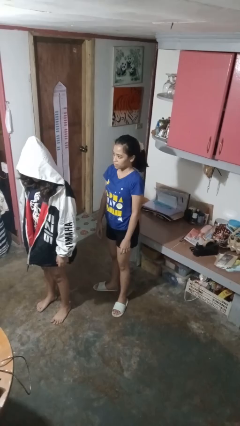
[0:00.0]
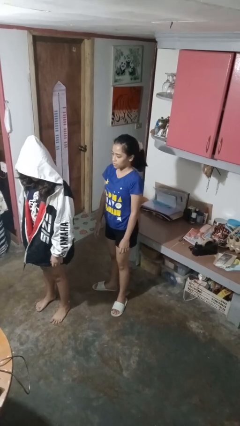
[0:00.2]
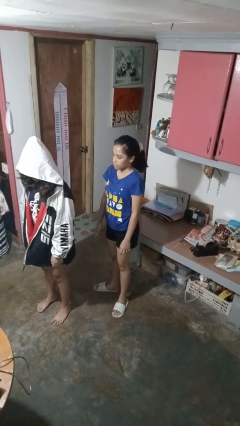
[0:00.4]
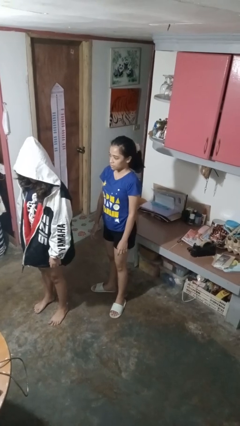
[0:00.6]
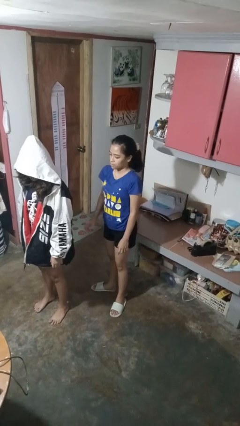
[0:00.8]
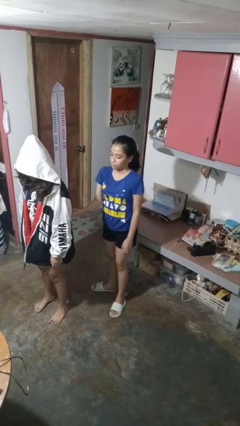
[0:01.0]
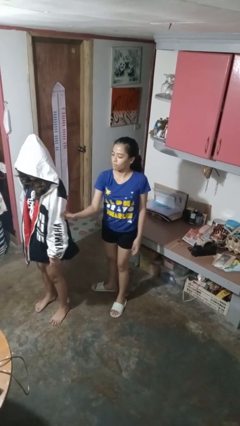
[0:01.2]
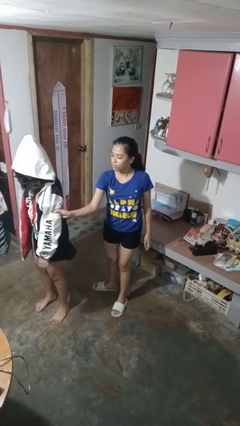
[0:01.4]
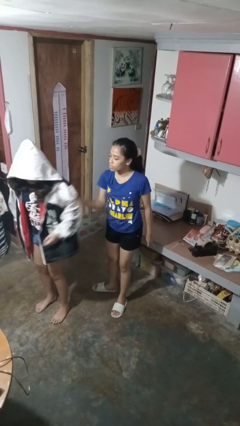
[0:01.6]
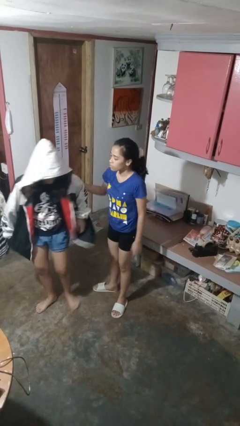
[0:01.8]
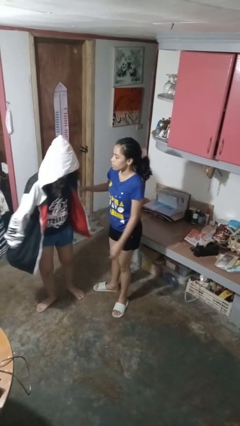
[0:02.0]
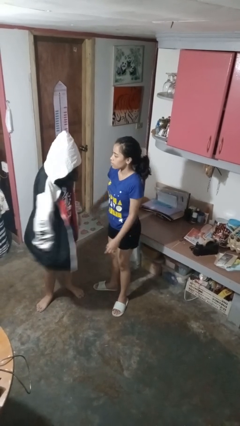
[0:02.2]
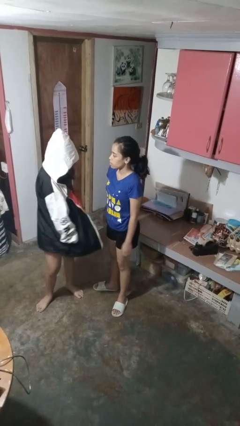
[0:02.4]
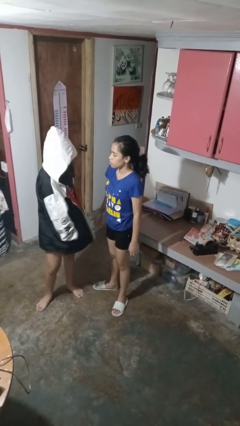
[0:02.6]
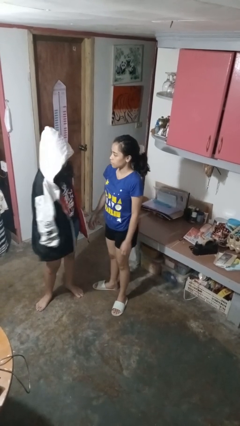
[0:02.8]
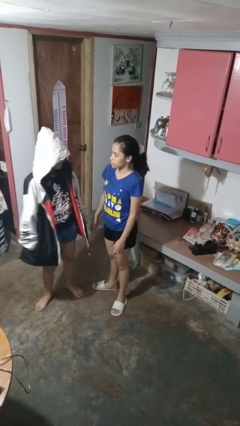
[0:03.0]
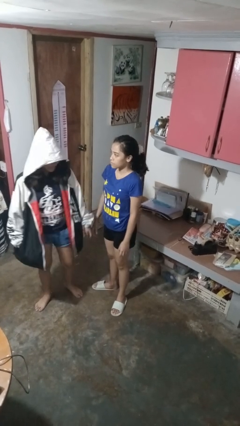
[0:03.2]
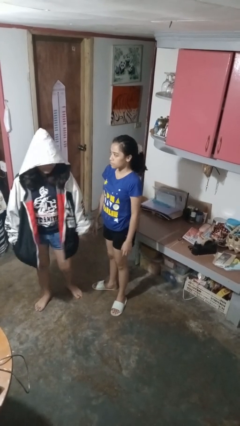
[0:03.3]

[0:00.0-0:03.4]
person grabs person by bicep

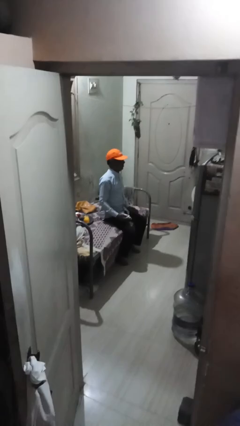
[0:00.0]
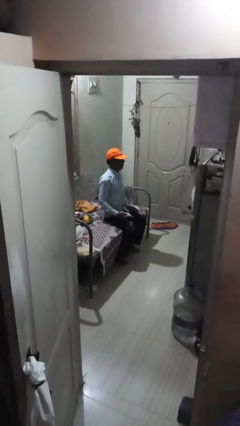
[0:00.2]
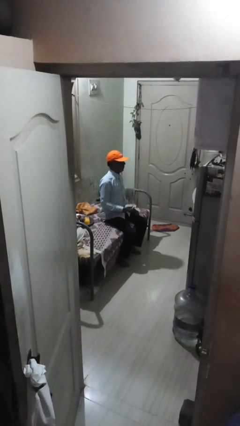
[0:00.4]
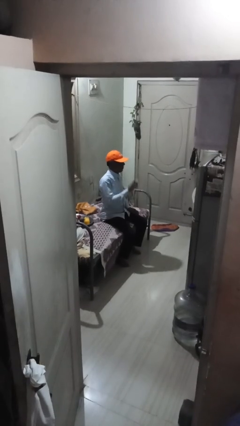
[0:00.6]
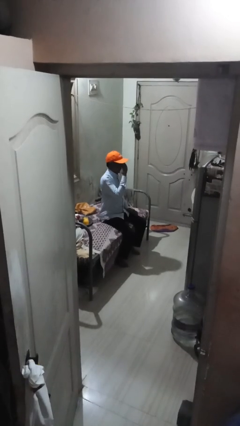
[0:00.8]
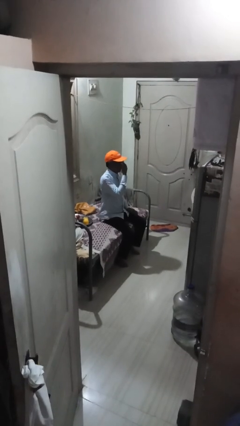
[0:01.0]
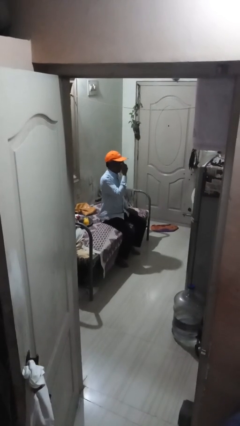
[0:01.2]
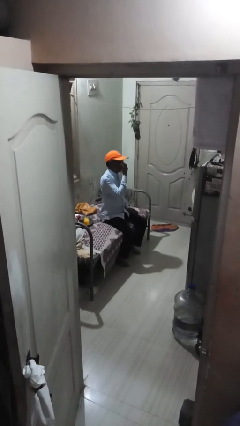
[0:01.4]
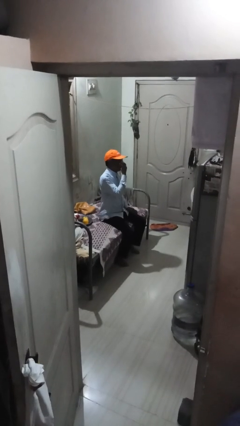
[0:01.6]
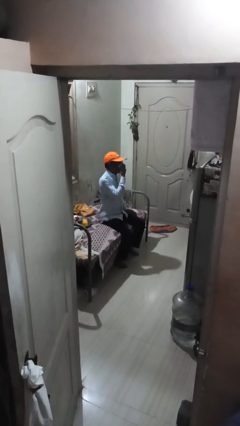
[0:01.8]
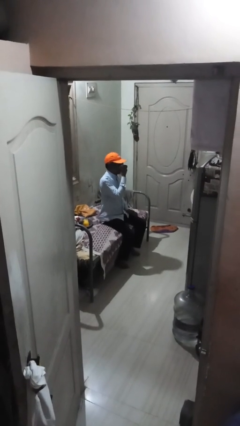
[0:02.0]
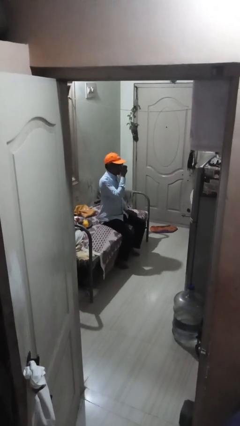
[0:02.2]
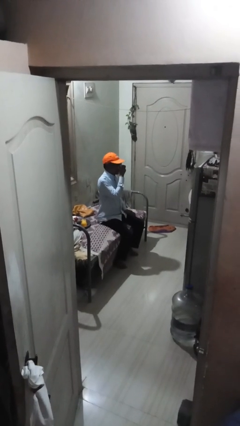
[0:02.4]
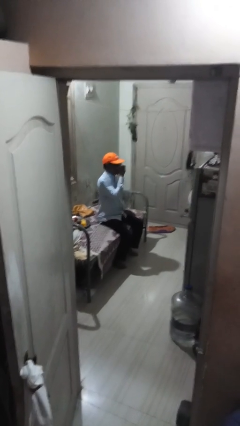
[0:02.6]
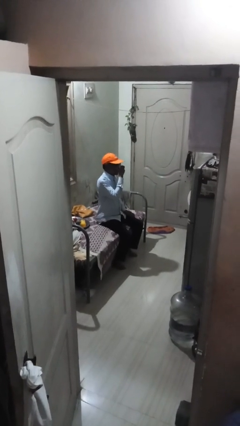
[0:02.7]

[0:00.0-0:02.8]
person blows nose

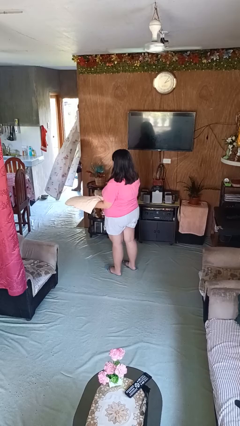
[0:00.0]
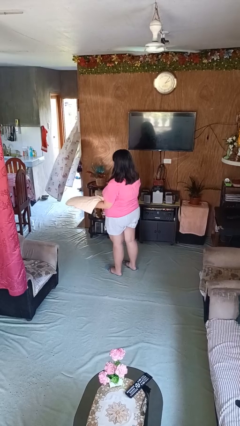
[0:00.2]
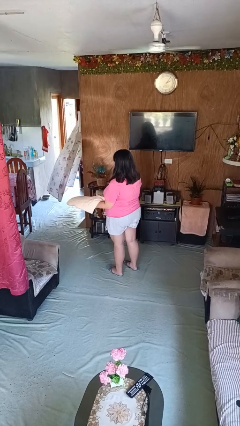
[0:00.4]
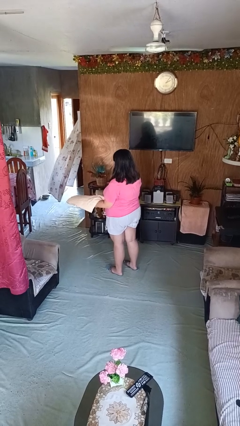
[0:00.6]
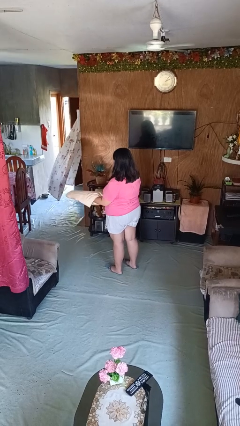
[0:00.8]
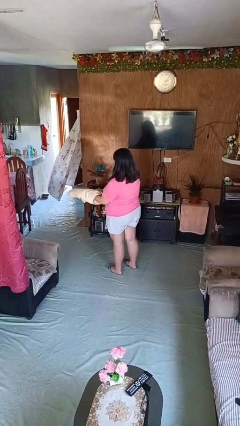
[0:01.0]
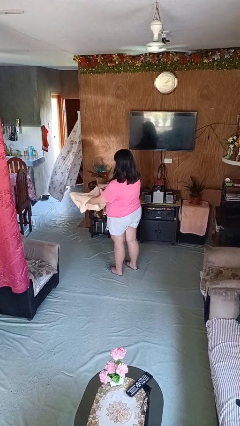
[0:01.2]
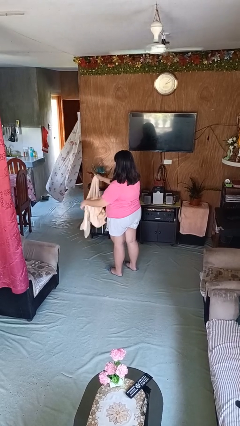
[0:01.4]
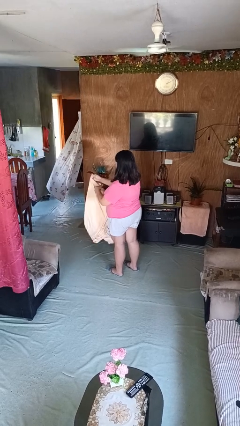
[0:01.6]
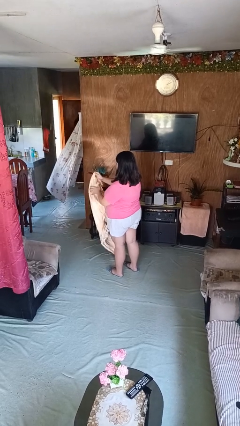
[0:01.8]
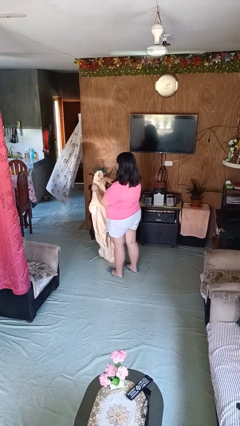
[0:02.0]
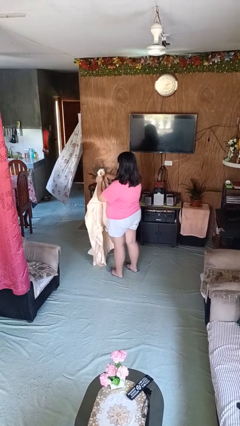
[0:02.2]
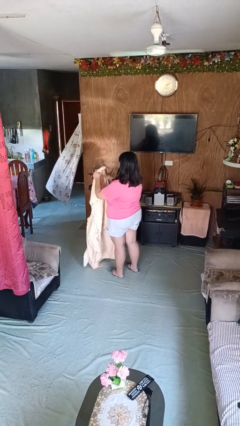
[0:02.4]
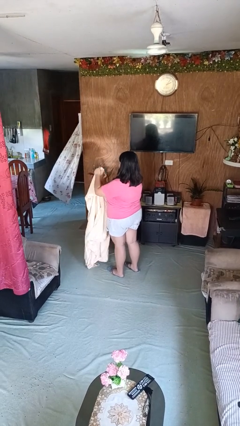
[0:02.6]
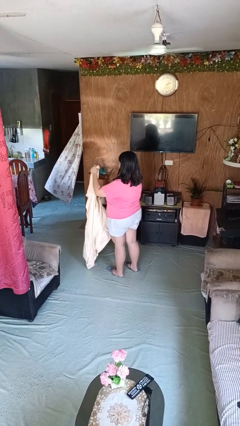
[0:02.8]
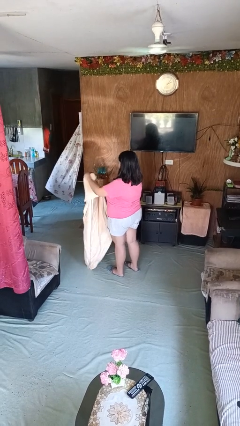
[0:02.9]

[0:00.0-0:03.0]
person unfolds blanket

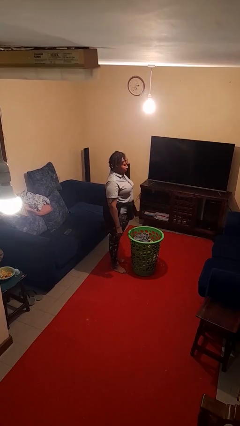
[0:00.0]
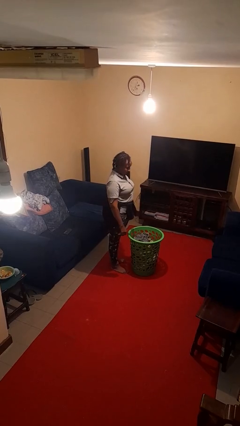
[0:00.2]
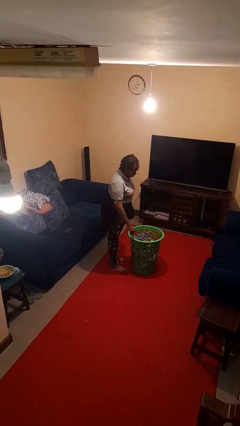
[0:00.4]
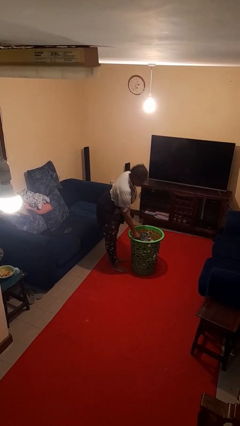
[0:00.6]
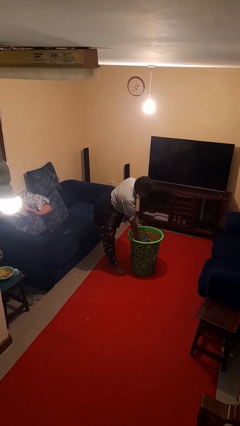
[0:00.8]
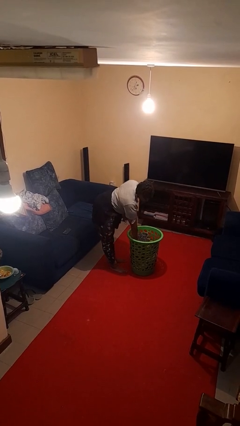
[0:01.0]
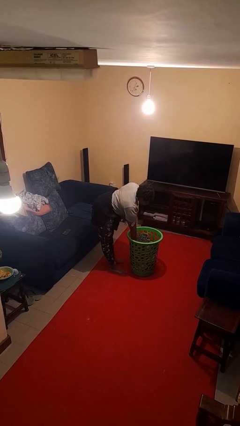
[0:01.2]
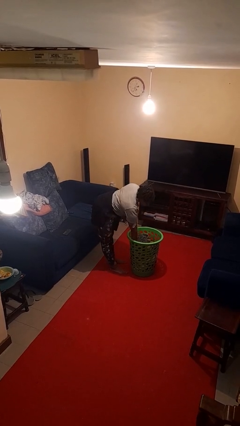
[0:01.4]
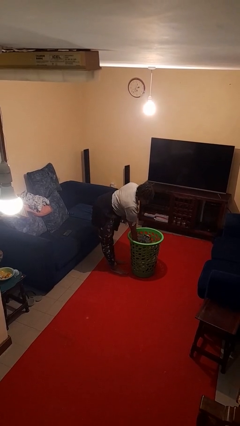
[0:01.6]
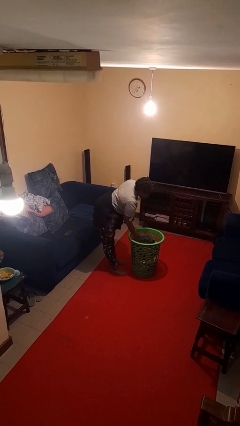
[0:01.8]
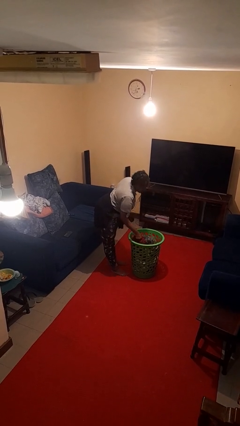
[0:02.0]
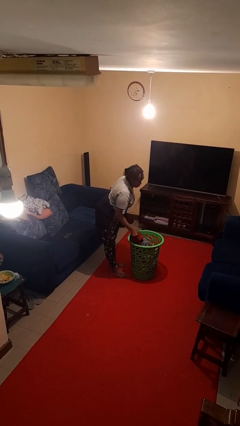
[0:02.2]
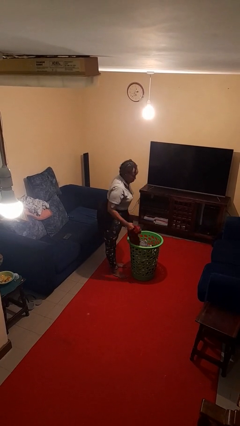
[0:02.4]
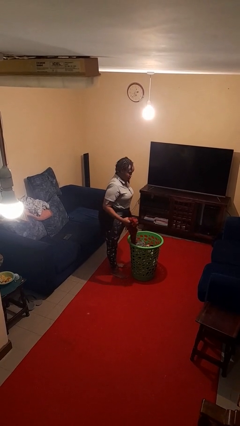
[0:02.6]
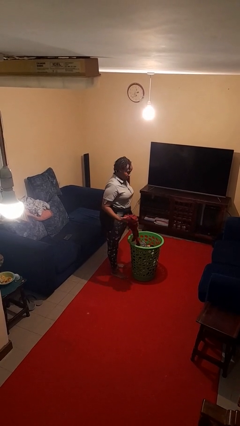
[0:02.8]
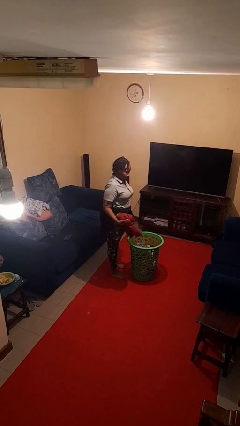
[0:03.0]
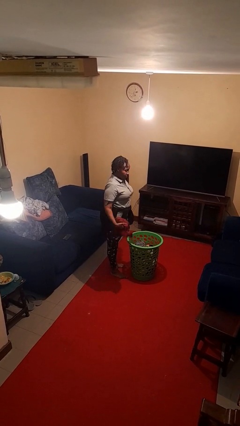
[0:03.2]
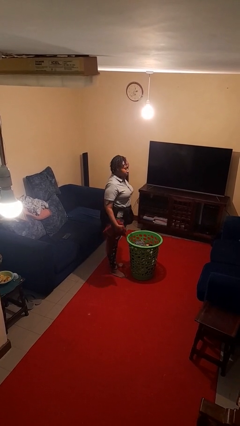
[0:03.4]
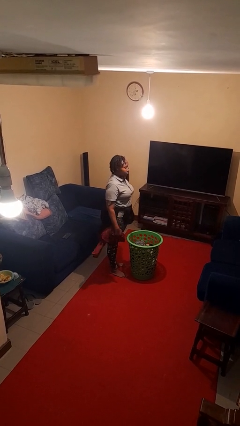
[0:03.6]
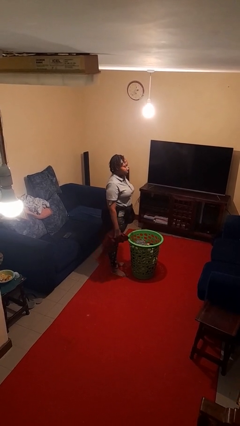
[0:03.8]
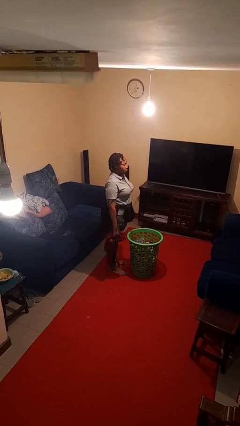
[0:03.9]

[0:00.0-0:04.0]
person takes object from basket

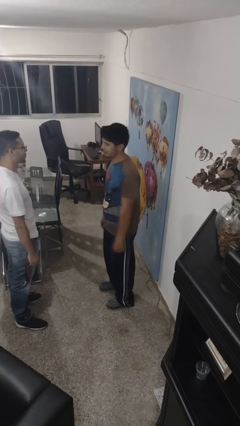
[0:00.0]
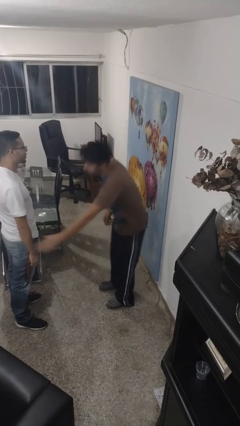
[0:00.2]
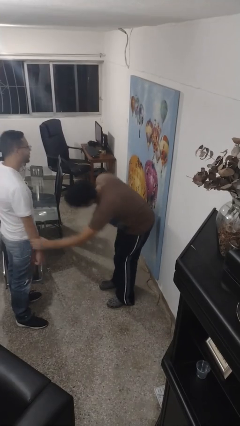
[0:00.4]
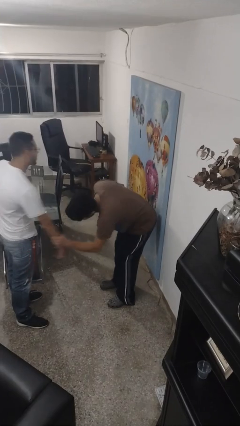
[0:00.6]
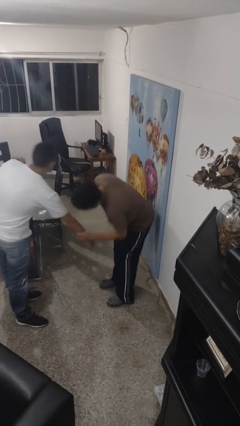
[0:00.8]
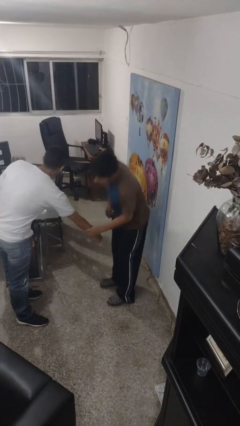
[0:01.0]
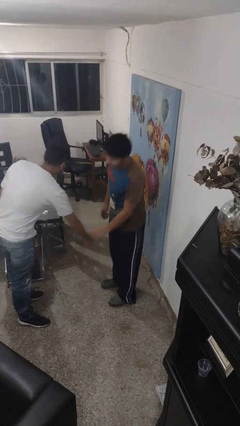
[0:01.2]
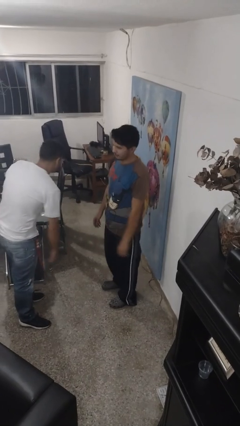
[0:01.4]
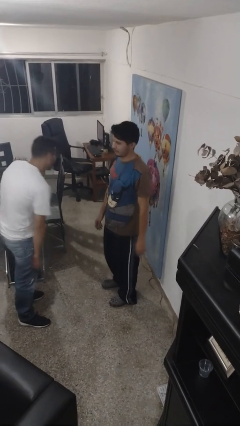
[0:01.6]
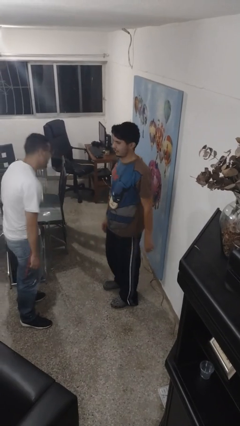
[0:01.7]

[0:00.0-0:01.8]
person grabs person by forearm

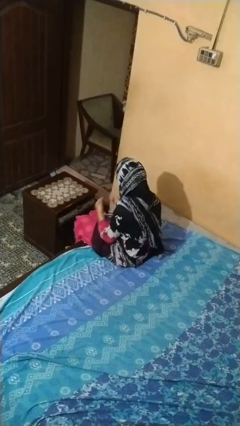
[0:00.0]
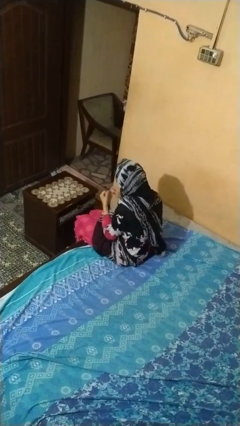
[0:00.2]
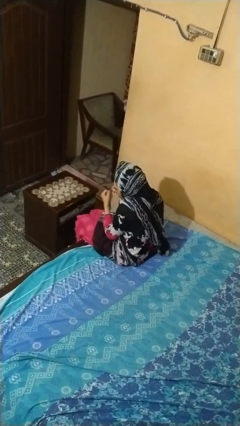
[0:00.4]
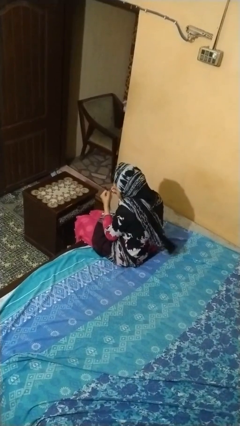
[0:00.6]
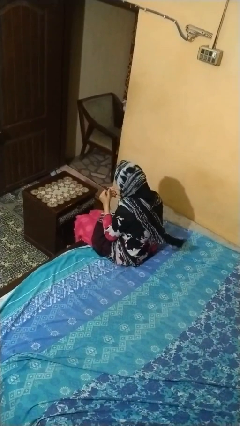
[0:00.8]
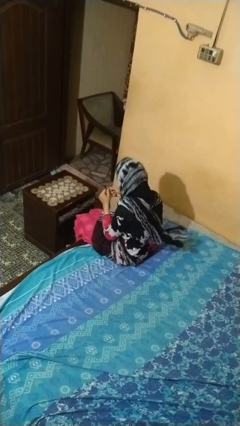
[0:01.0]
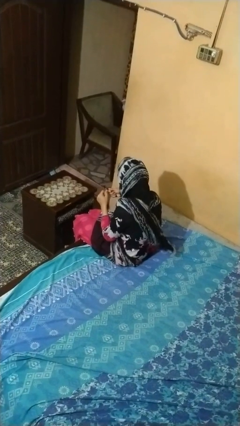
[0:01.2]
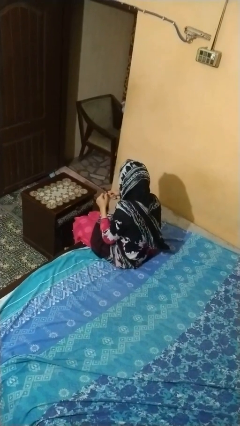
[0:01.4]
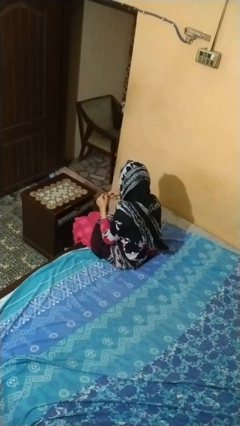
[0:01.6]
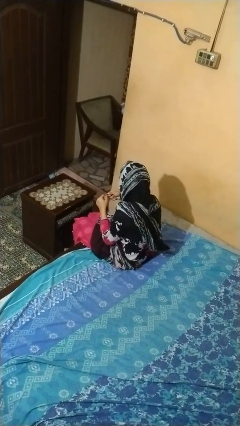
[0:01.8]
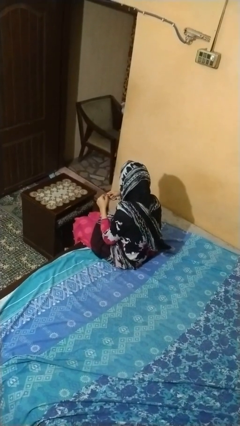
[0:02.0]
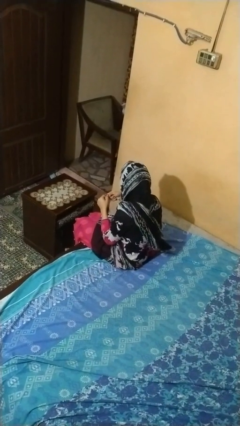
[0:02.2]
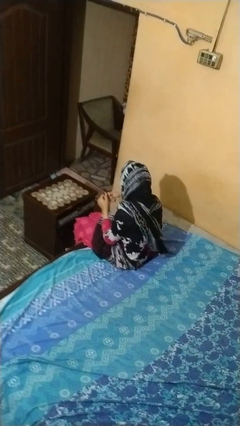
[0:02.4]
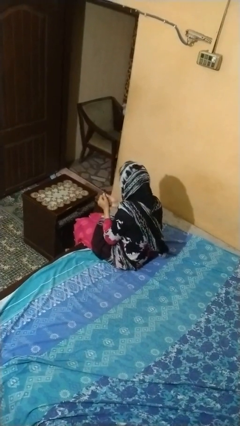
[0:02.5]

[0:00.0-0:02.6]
person files fingernails
